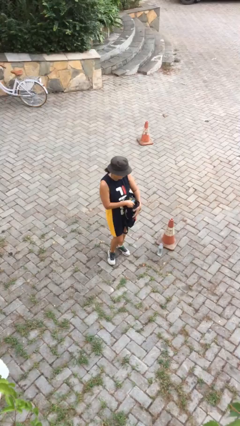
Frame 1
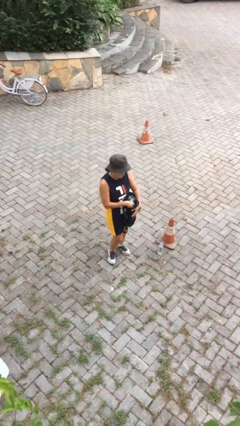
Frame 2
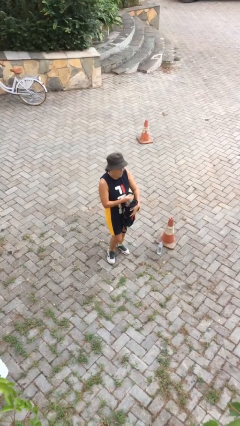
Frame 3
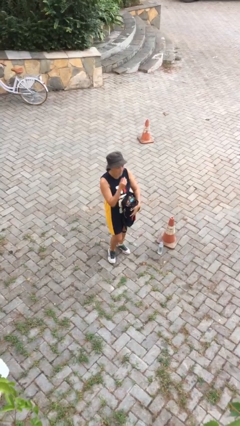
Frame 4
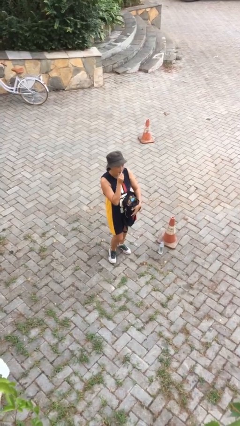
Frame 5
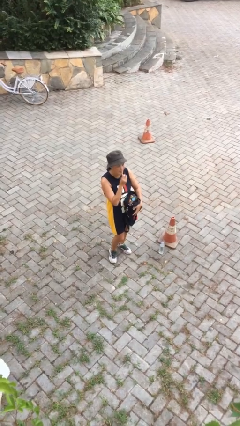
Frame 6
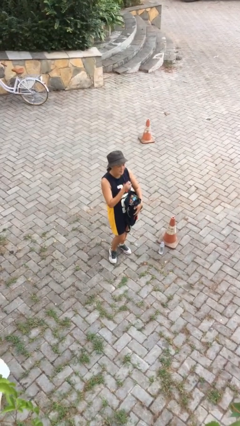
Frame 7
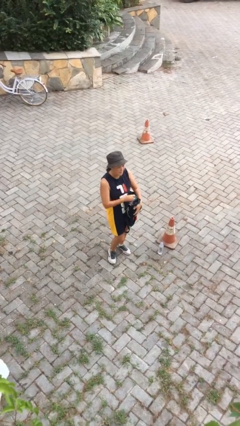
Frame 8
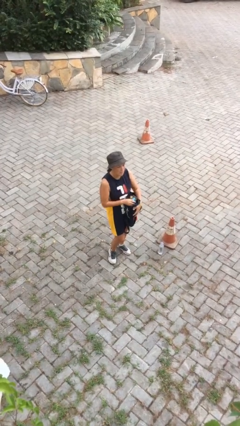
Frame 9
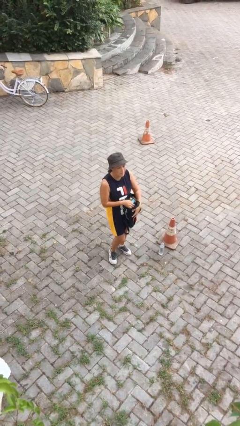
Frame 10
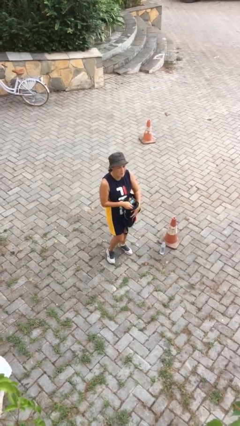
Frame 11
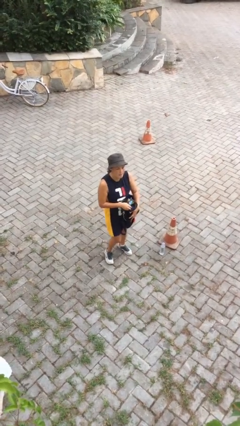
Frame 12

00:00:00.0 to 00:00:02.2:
person eats snack from bag

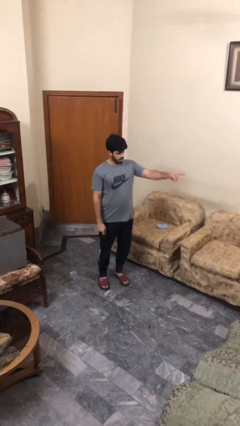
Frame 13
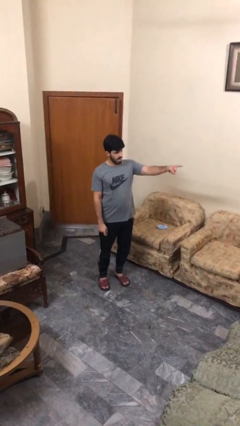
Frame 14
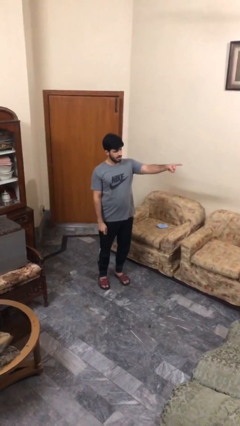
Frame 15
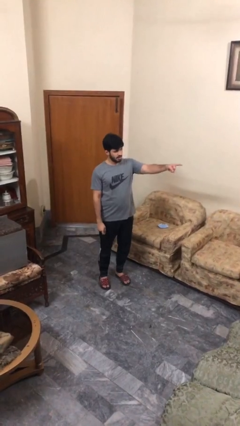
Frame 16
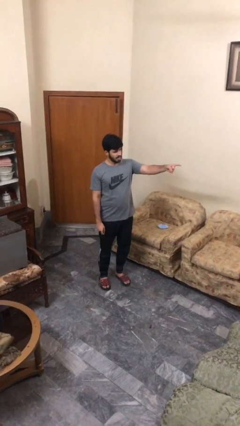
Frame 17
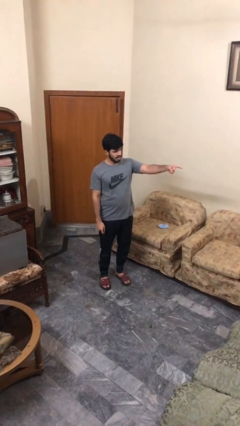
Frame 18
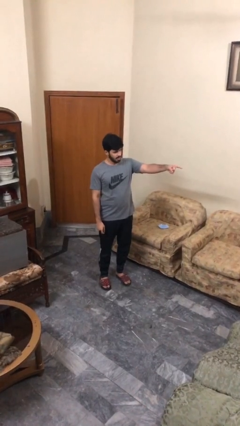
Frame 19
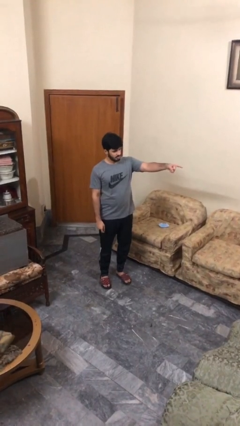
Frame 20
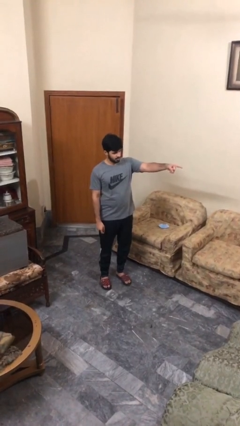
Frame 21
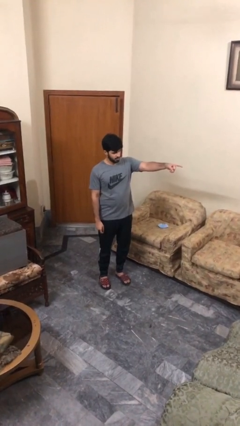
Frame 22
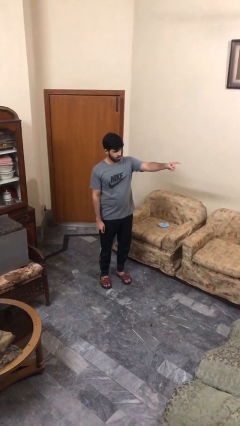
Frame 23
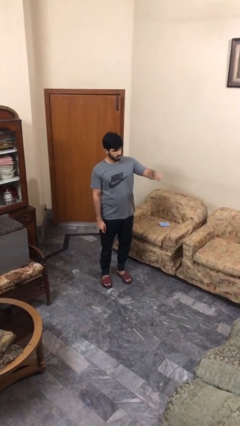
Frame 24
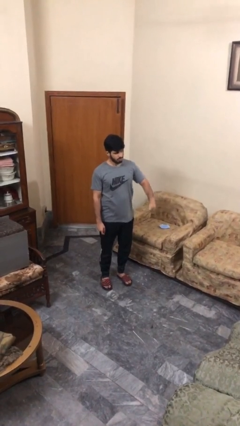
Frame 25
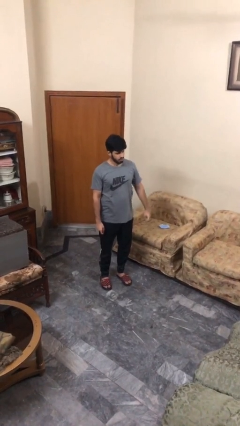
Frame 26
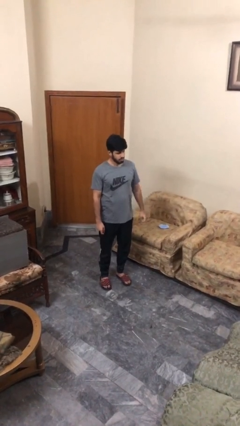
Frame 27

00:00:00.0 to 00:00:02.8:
person points at person

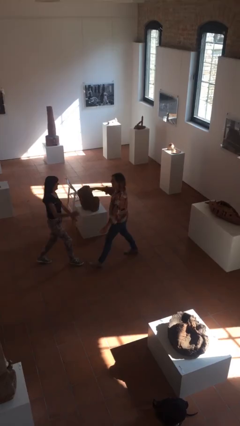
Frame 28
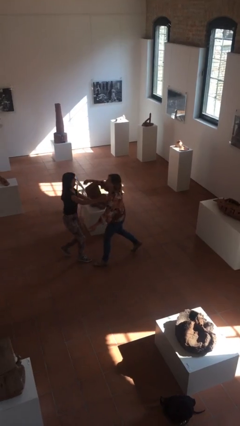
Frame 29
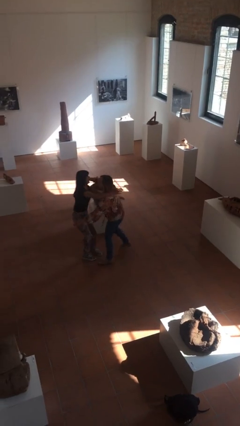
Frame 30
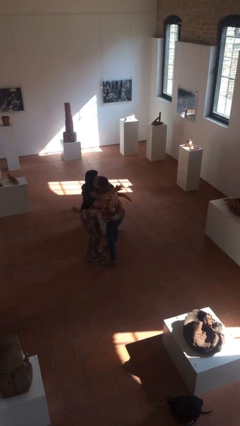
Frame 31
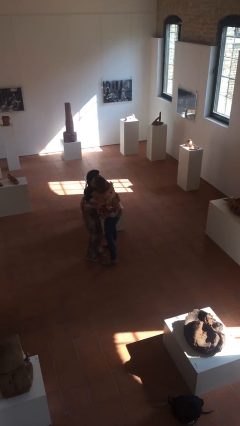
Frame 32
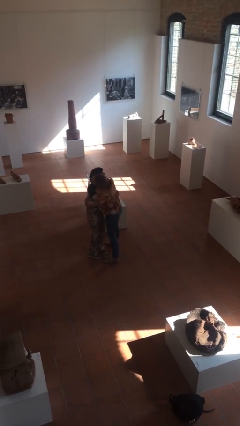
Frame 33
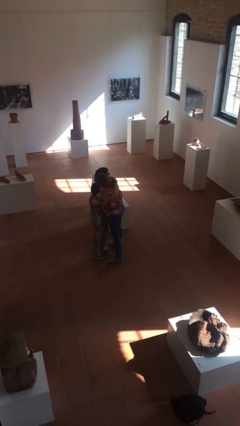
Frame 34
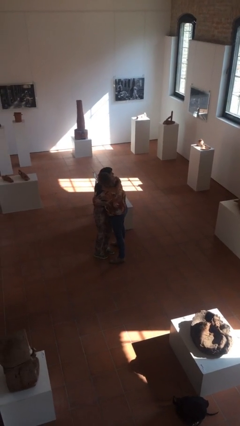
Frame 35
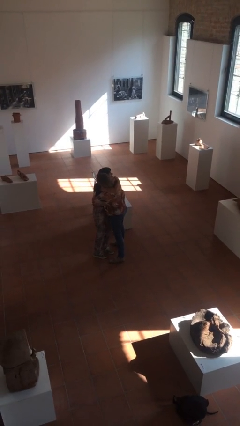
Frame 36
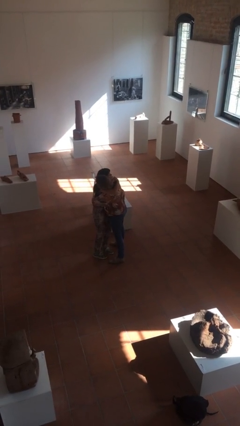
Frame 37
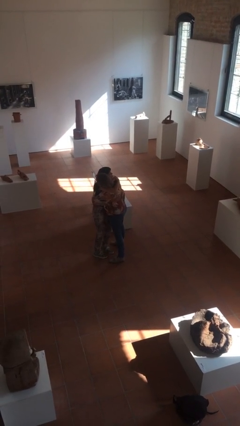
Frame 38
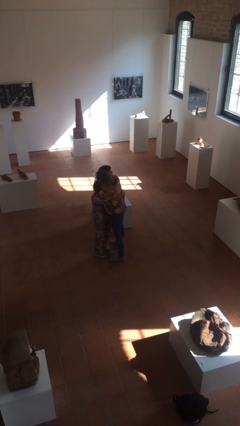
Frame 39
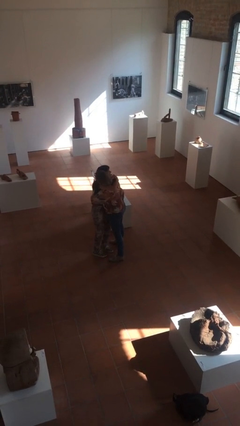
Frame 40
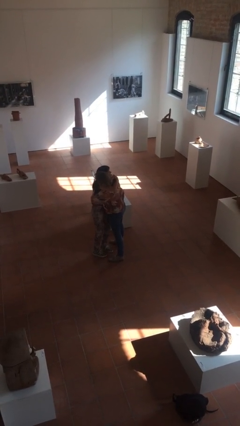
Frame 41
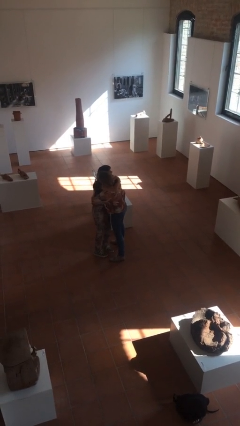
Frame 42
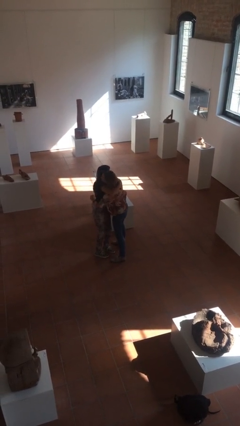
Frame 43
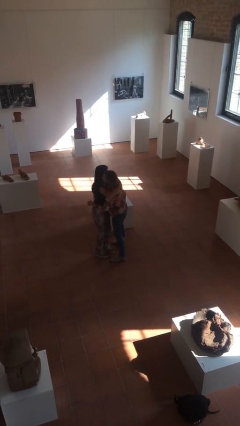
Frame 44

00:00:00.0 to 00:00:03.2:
person embraces person

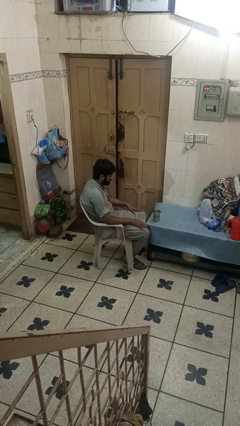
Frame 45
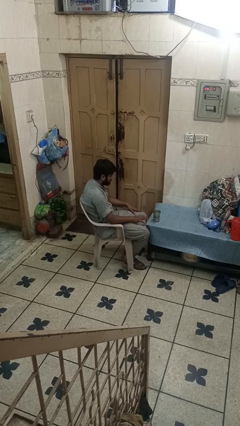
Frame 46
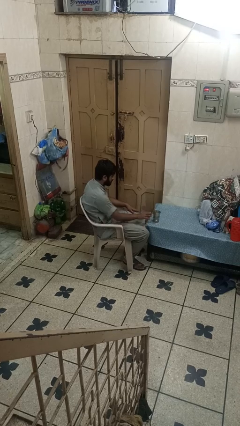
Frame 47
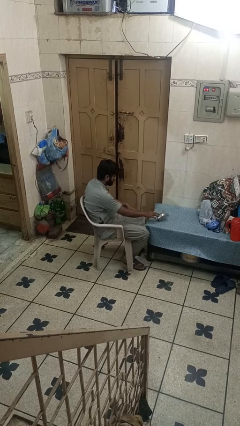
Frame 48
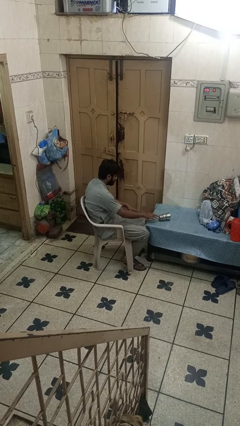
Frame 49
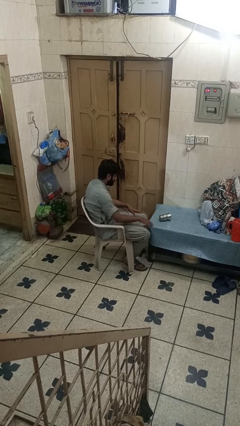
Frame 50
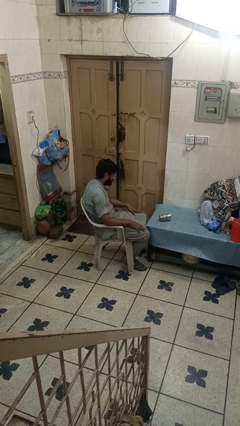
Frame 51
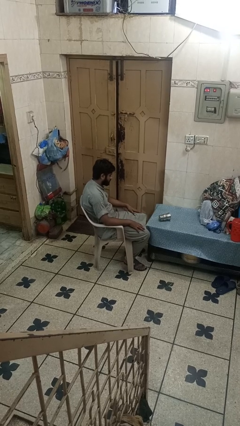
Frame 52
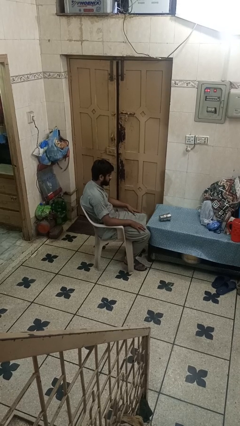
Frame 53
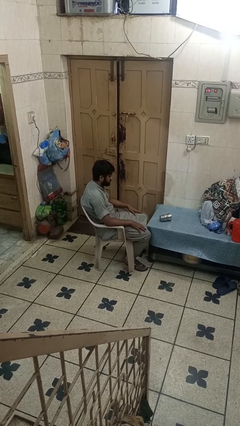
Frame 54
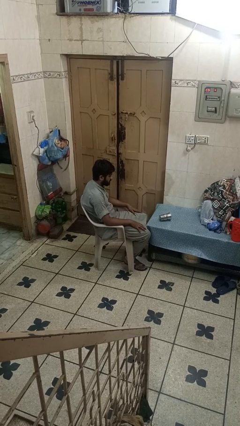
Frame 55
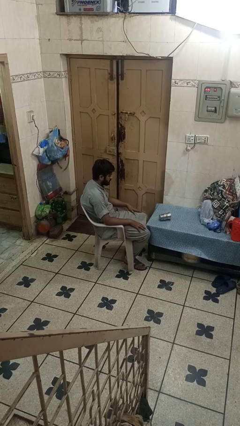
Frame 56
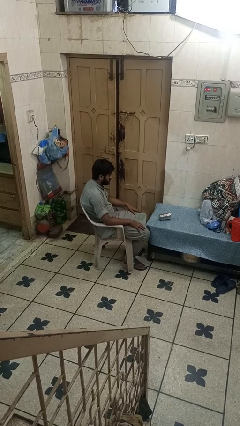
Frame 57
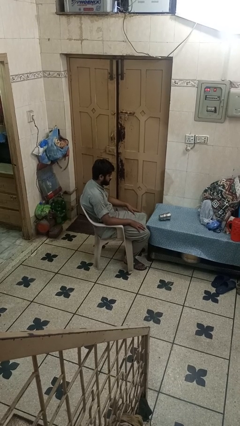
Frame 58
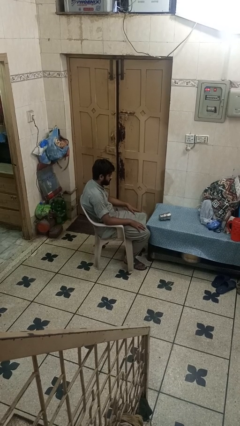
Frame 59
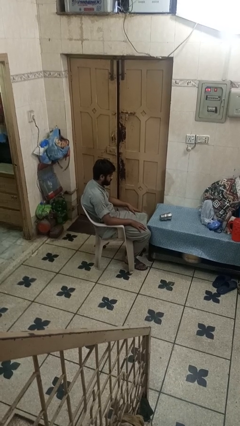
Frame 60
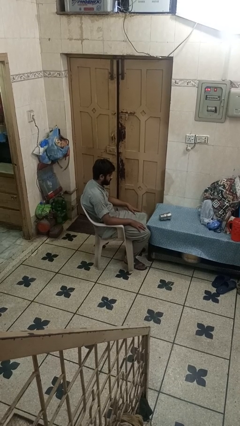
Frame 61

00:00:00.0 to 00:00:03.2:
person knocks over glass

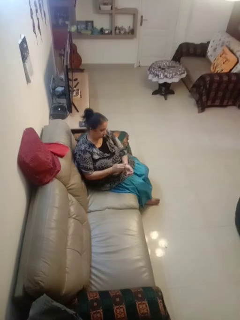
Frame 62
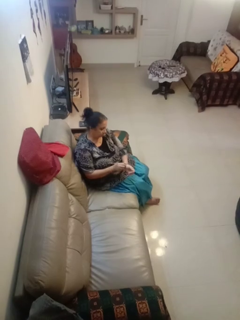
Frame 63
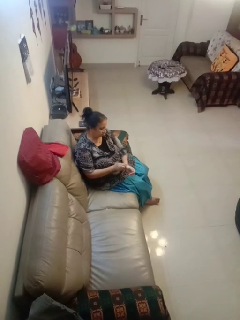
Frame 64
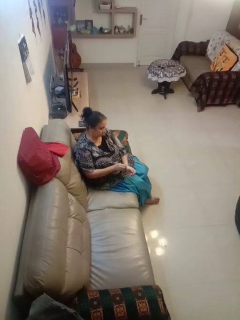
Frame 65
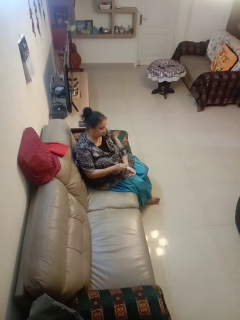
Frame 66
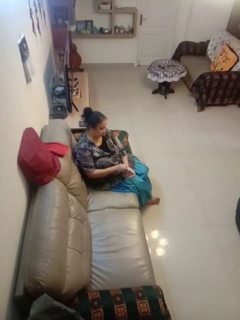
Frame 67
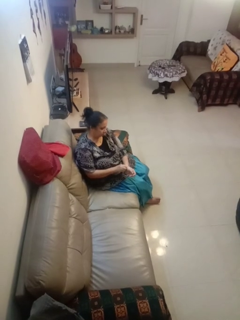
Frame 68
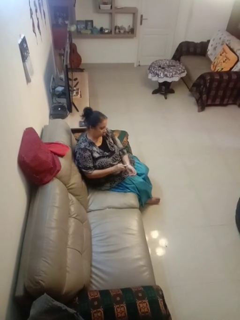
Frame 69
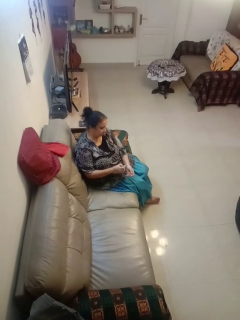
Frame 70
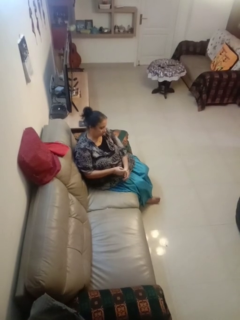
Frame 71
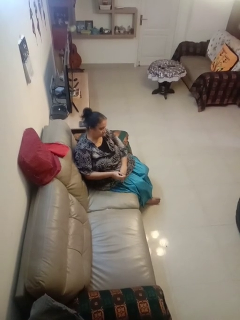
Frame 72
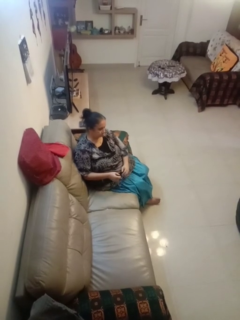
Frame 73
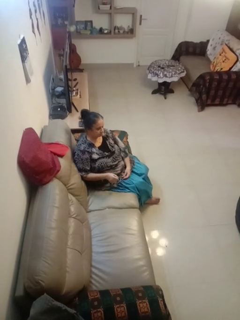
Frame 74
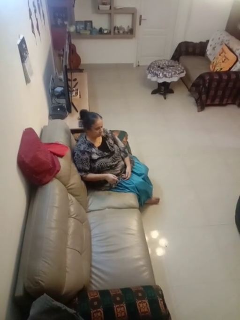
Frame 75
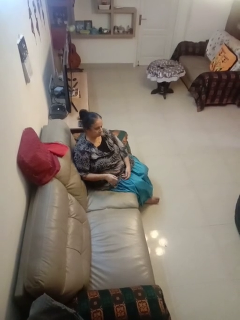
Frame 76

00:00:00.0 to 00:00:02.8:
person takes off wristwatch

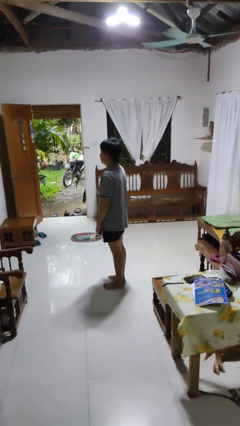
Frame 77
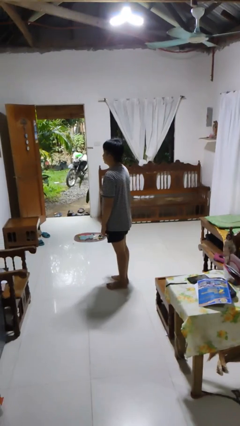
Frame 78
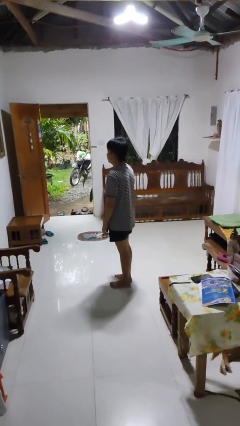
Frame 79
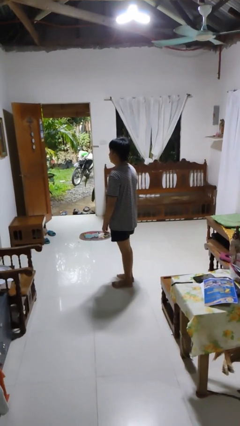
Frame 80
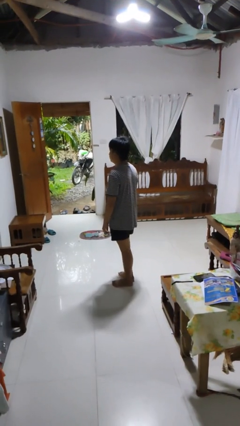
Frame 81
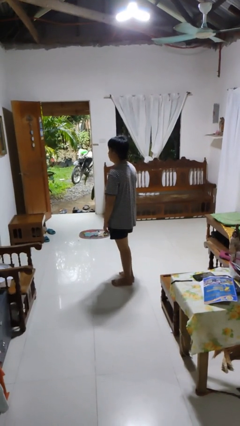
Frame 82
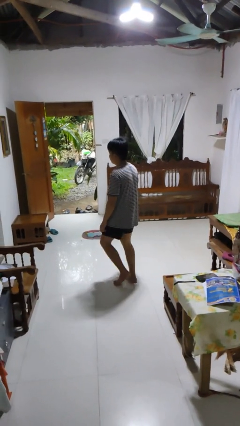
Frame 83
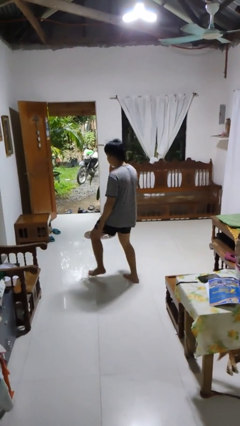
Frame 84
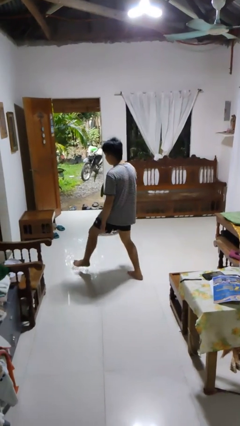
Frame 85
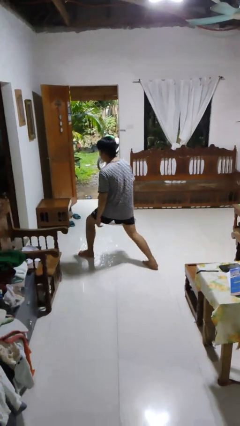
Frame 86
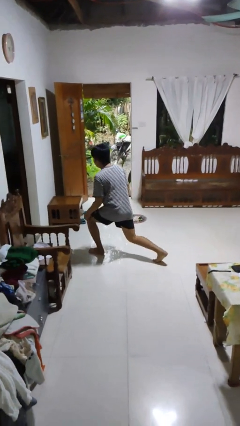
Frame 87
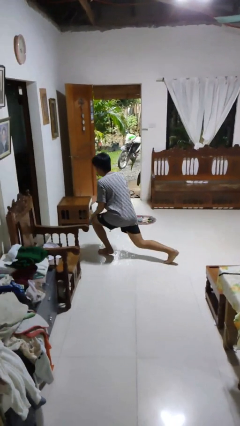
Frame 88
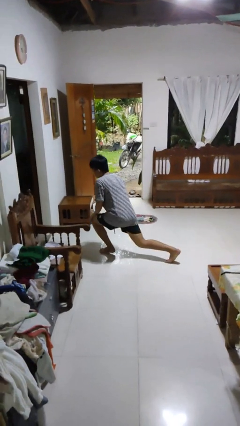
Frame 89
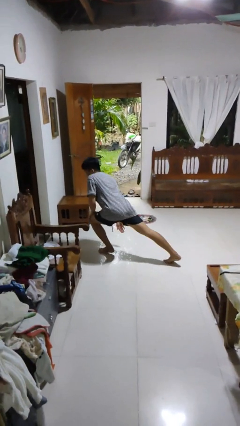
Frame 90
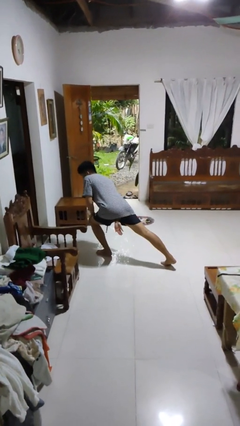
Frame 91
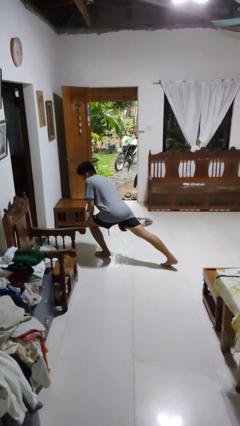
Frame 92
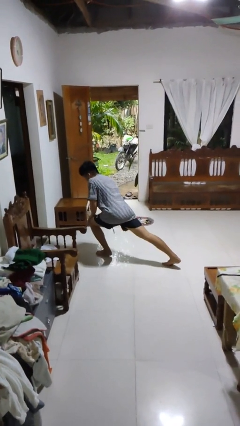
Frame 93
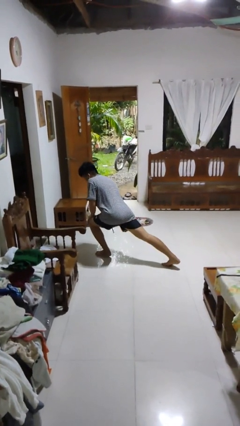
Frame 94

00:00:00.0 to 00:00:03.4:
person exercises with lunges

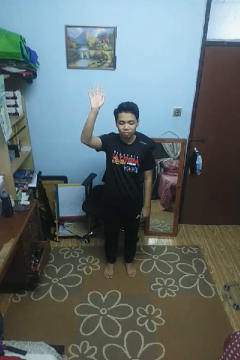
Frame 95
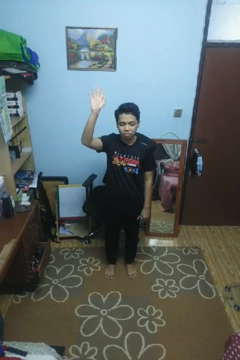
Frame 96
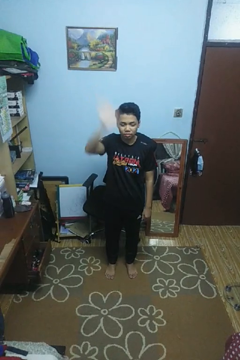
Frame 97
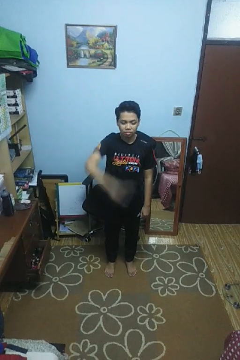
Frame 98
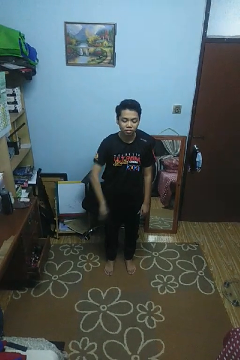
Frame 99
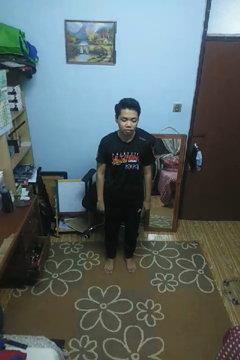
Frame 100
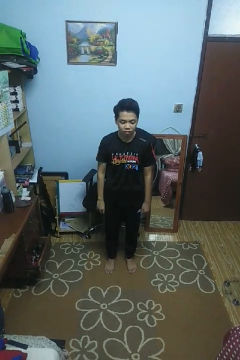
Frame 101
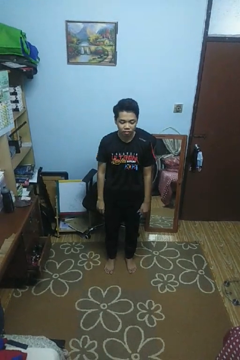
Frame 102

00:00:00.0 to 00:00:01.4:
person gestures swipe down
